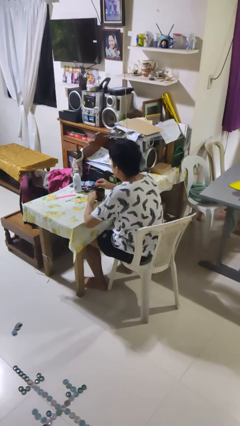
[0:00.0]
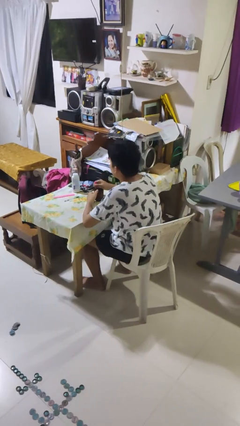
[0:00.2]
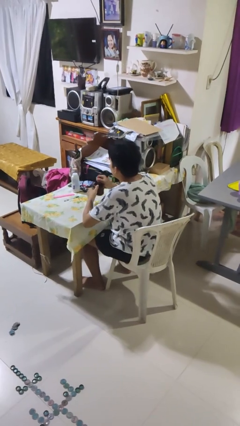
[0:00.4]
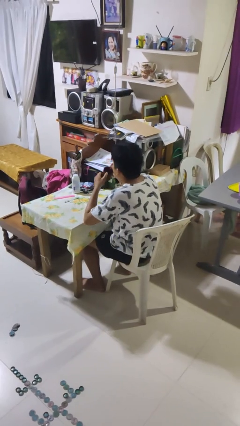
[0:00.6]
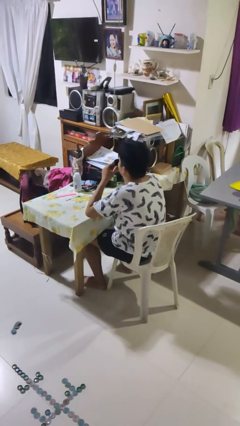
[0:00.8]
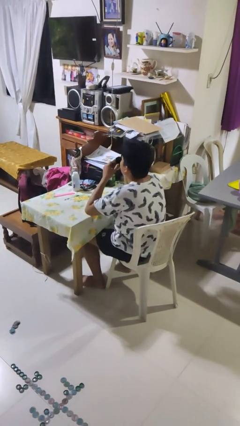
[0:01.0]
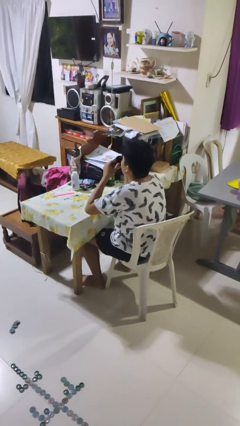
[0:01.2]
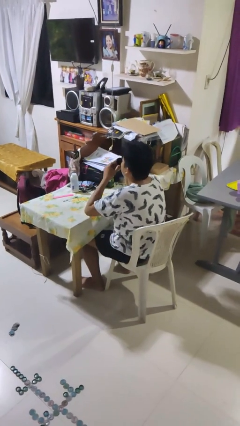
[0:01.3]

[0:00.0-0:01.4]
person drinks from mug

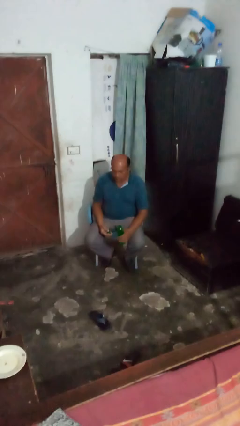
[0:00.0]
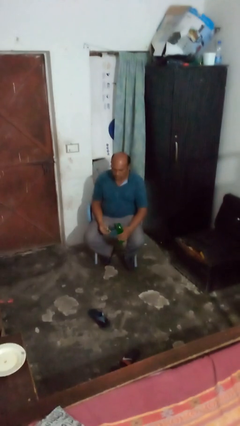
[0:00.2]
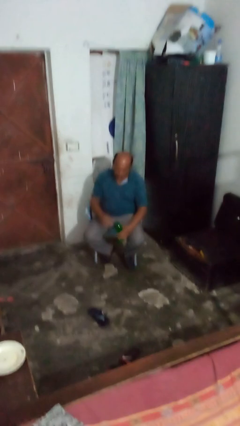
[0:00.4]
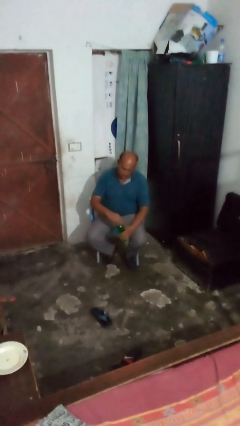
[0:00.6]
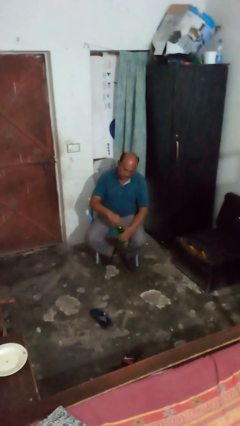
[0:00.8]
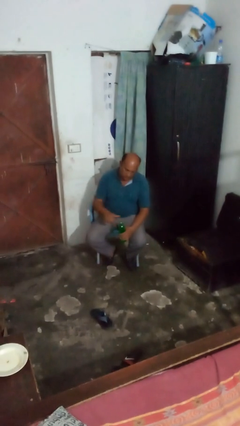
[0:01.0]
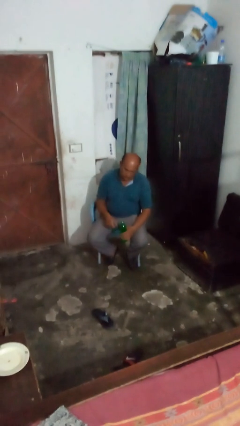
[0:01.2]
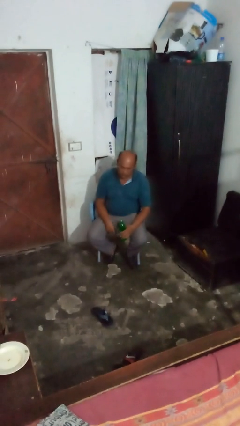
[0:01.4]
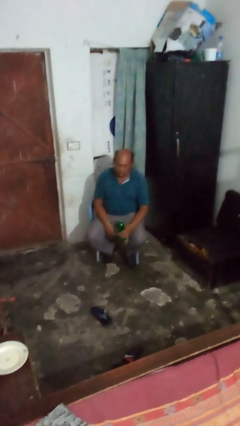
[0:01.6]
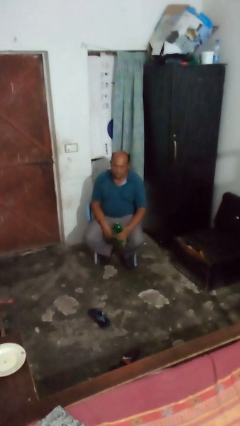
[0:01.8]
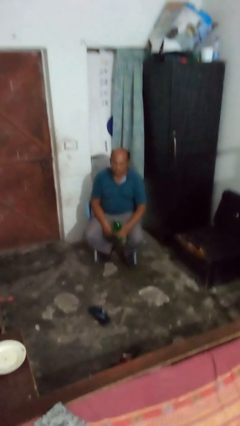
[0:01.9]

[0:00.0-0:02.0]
person screws lid to bottle

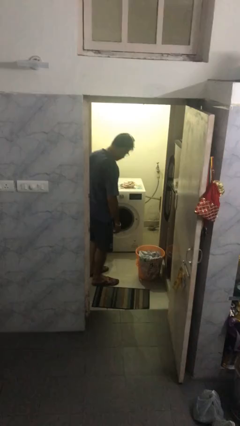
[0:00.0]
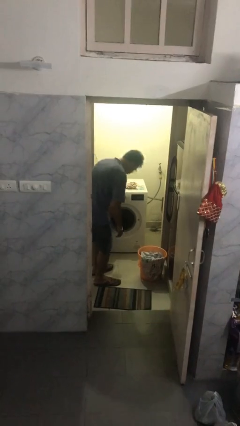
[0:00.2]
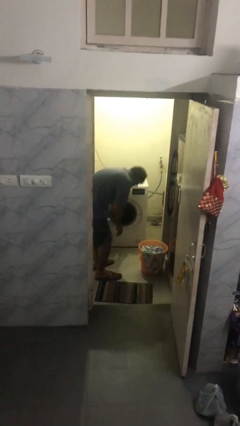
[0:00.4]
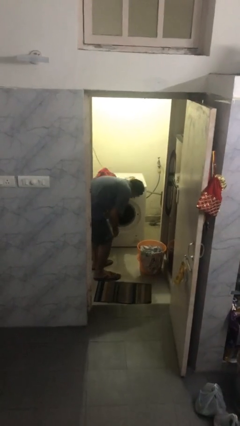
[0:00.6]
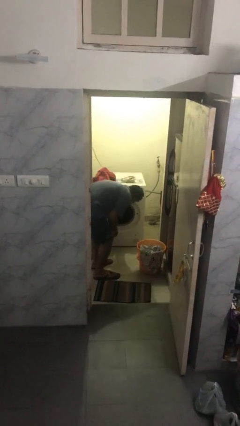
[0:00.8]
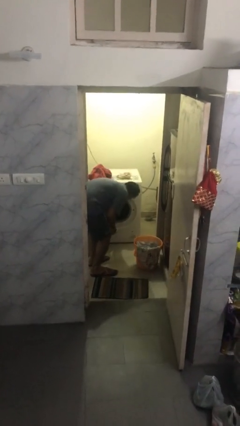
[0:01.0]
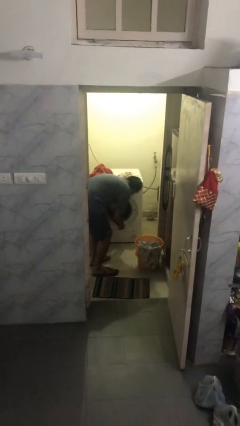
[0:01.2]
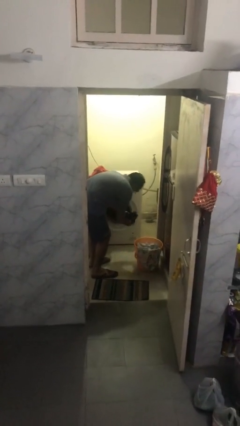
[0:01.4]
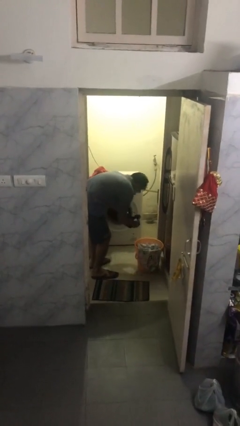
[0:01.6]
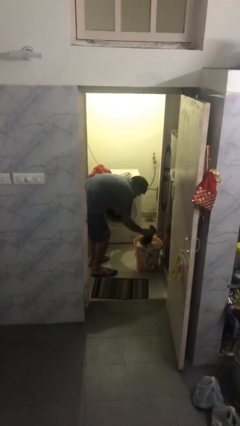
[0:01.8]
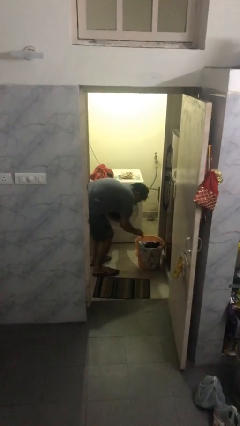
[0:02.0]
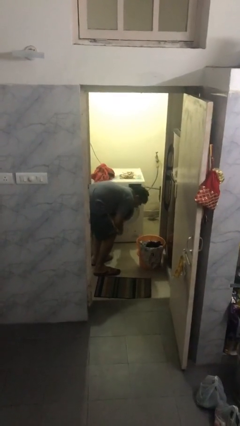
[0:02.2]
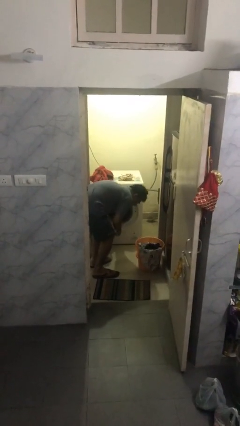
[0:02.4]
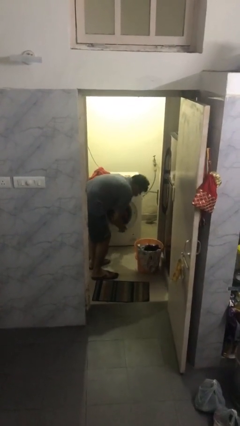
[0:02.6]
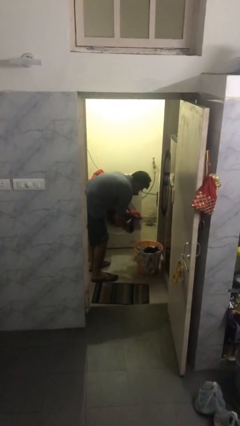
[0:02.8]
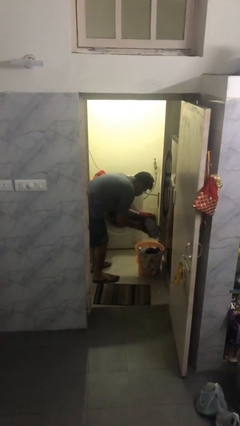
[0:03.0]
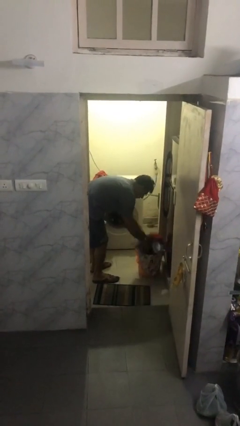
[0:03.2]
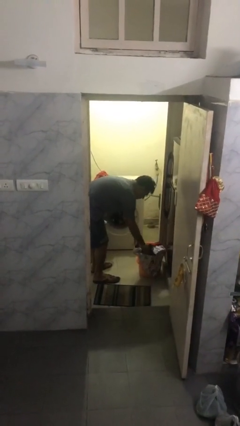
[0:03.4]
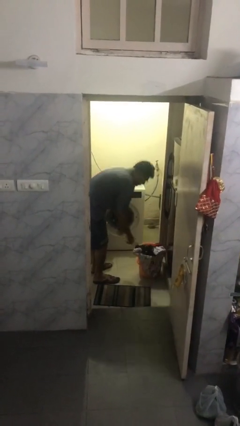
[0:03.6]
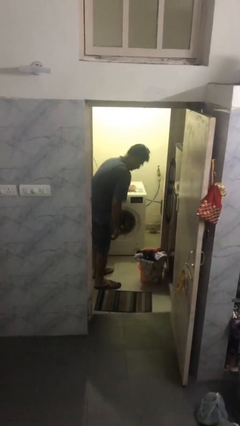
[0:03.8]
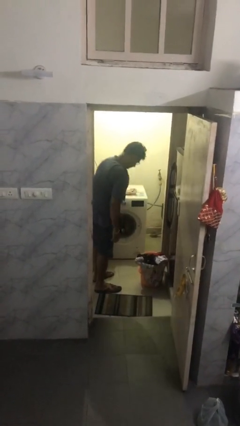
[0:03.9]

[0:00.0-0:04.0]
person unloads clotheswasher

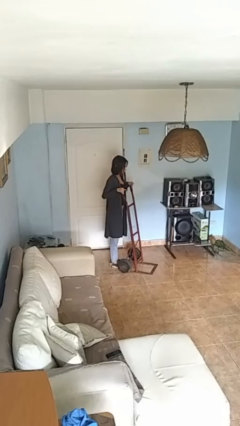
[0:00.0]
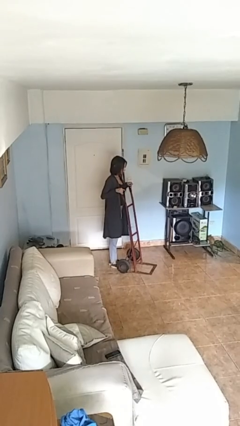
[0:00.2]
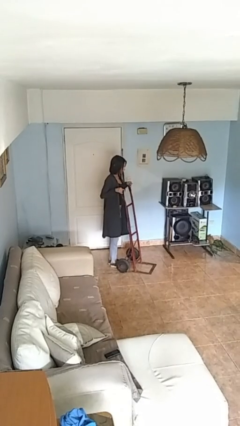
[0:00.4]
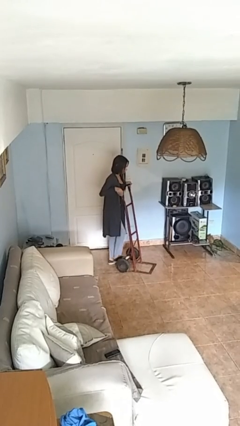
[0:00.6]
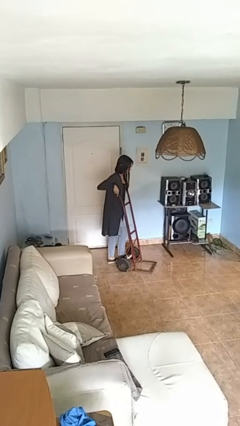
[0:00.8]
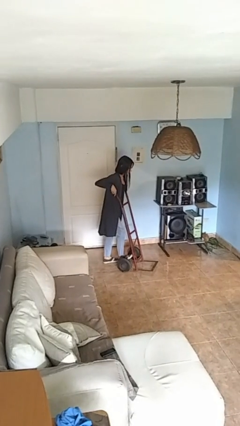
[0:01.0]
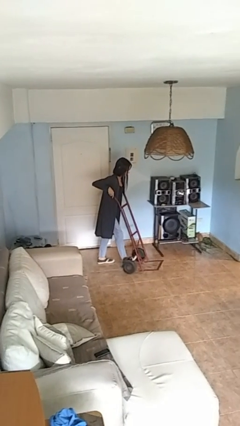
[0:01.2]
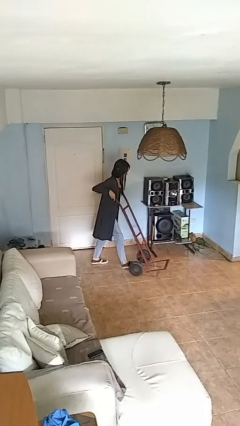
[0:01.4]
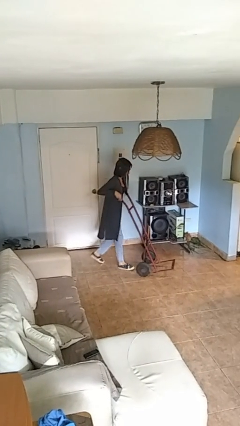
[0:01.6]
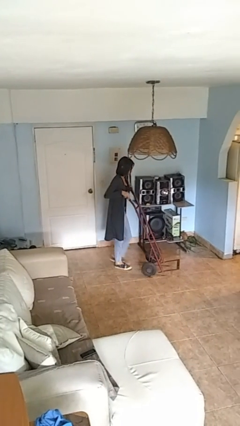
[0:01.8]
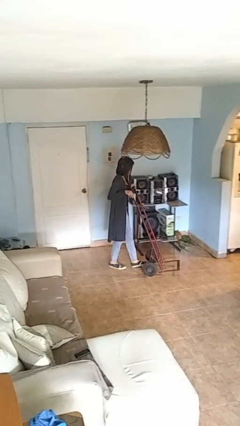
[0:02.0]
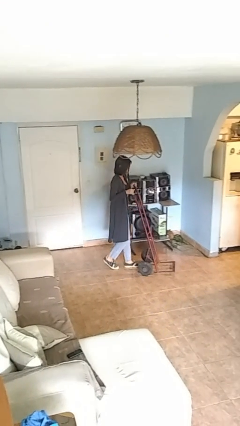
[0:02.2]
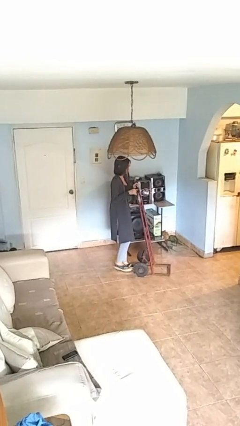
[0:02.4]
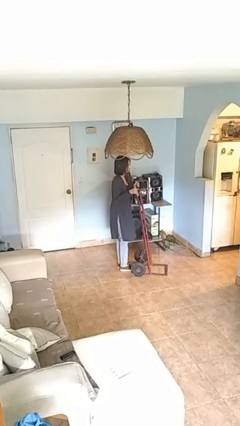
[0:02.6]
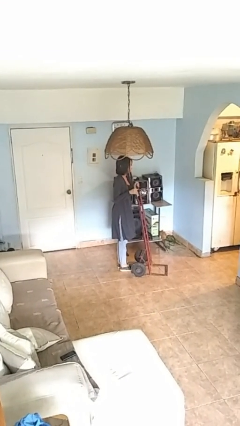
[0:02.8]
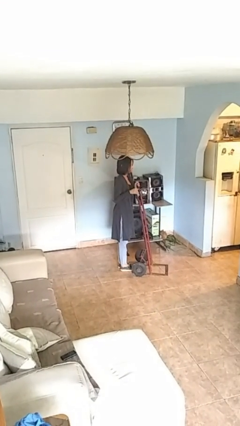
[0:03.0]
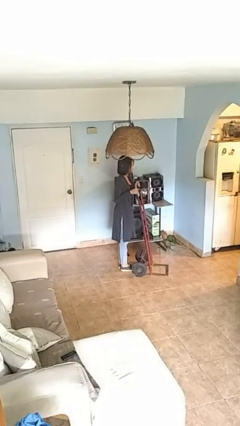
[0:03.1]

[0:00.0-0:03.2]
person pushes wheeled cart

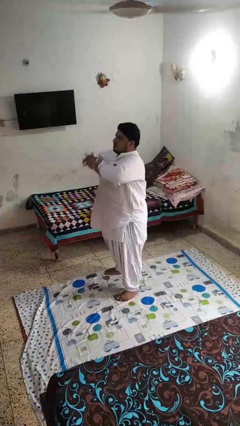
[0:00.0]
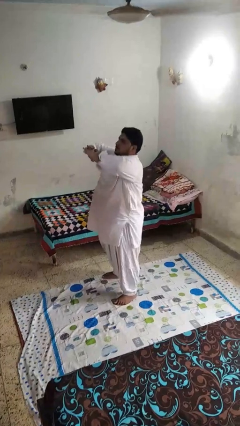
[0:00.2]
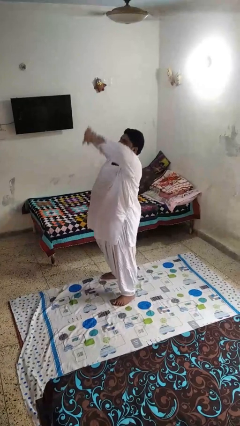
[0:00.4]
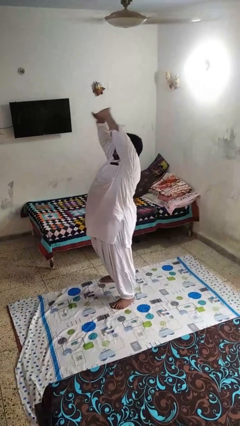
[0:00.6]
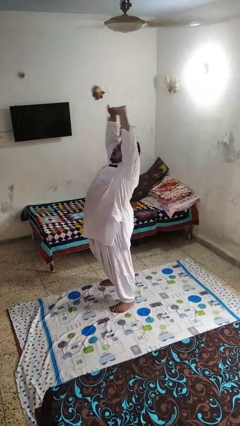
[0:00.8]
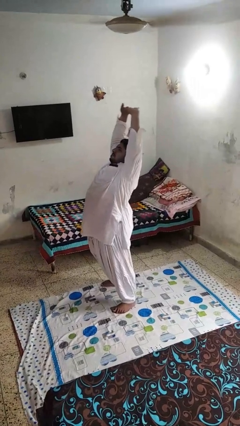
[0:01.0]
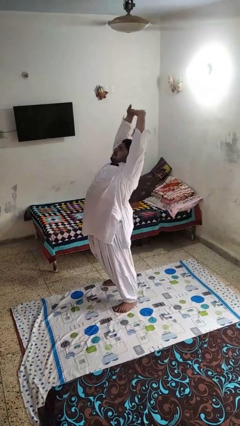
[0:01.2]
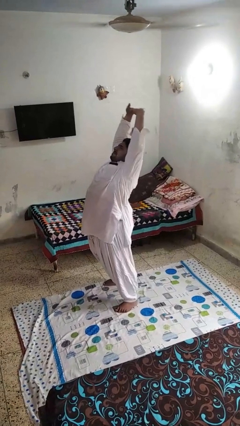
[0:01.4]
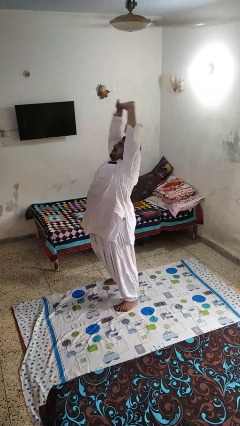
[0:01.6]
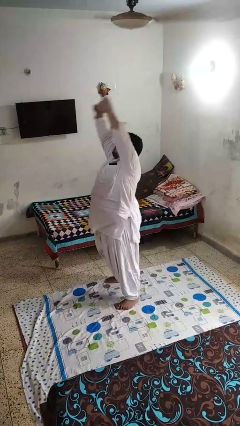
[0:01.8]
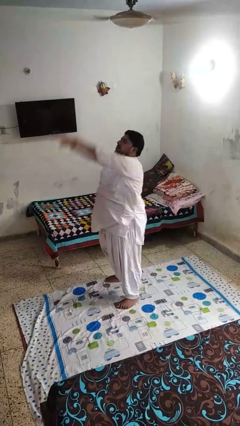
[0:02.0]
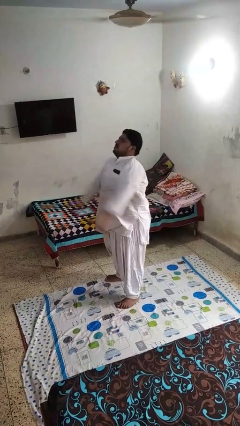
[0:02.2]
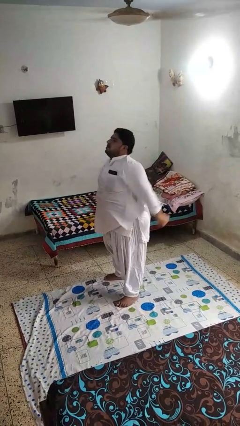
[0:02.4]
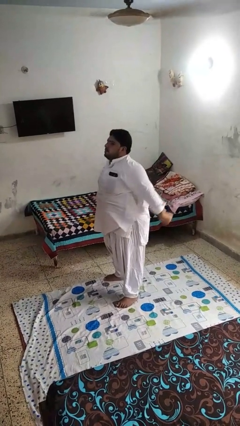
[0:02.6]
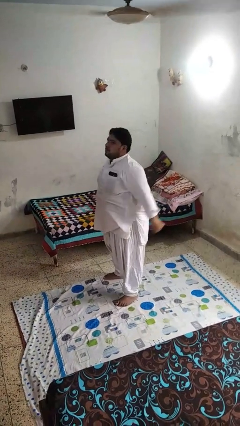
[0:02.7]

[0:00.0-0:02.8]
person stretches arms over head

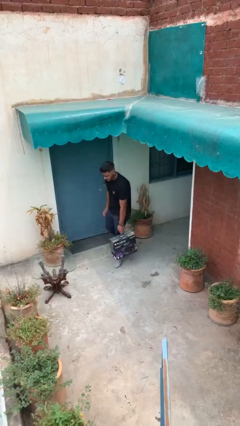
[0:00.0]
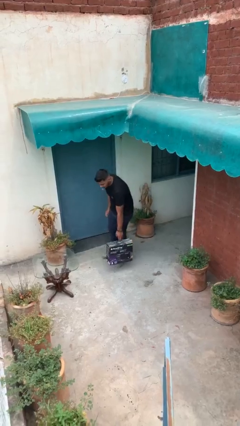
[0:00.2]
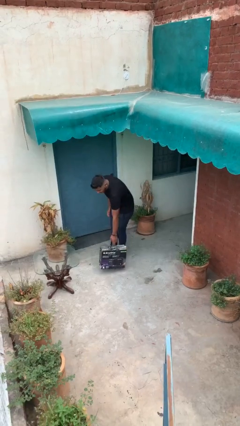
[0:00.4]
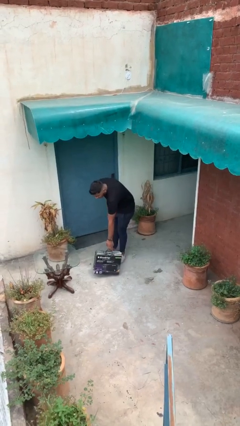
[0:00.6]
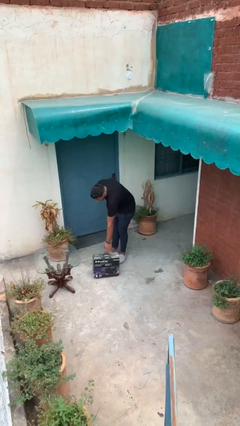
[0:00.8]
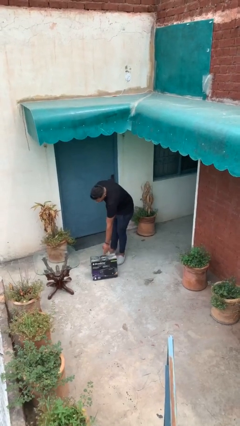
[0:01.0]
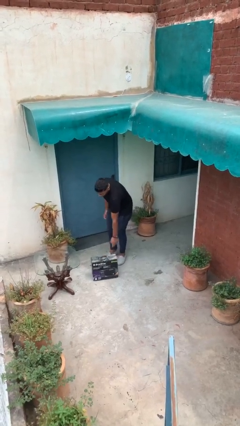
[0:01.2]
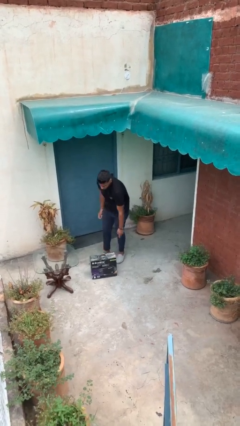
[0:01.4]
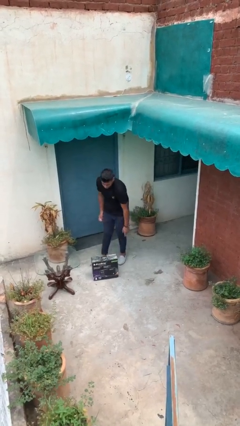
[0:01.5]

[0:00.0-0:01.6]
person puts down object on floor

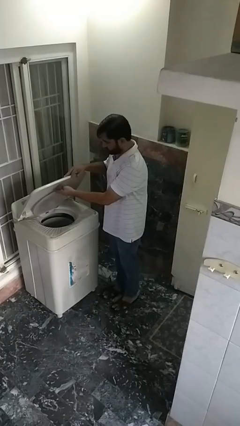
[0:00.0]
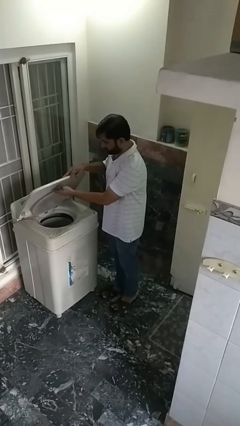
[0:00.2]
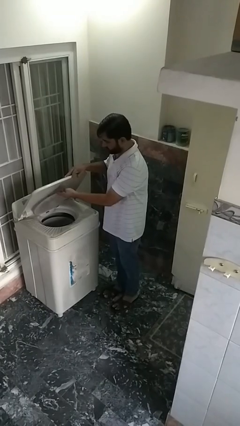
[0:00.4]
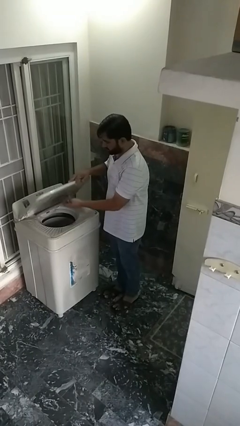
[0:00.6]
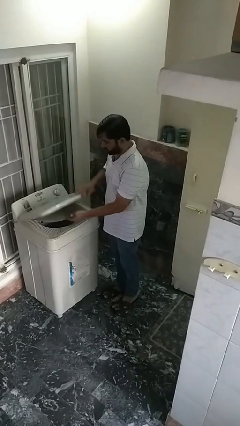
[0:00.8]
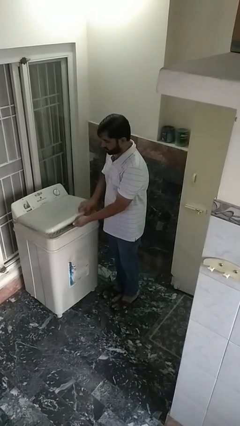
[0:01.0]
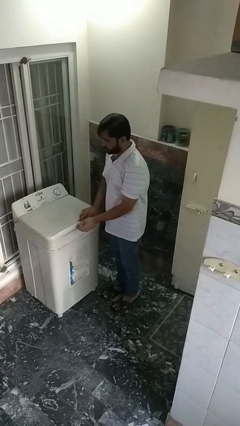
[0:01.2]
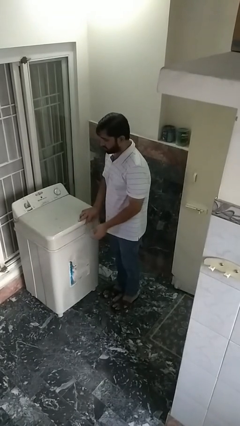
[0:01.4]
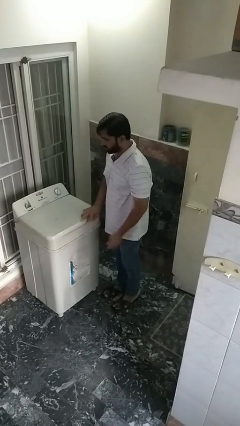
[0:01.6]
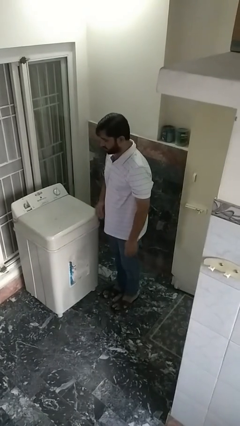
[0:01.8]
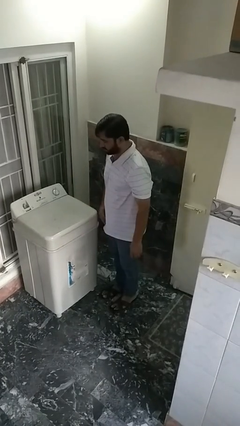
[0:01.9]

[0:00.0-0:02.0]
person closes clothes washer
